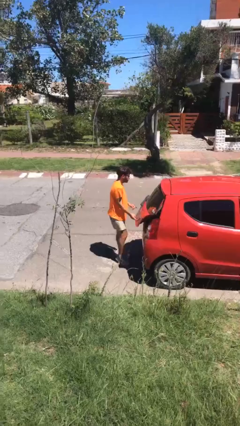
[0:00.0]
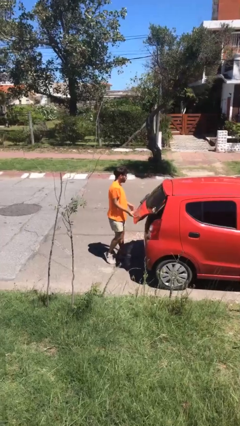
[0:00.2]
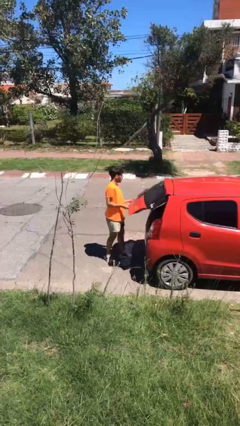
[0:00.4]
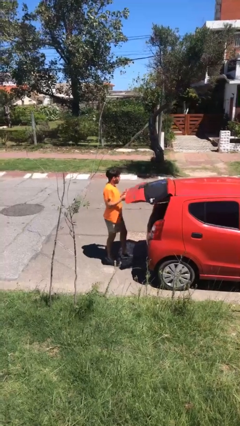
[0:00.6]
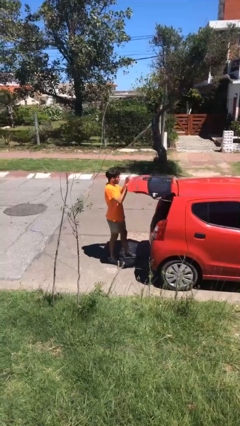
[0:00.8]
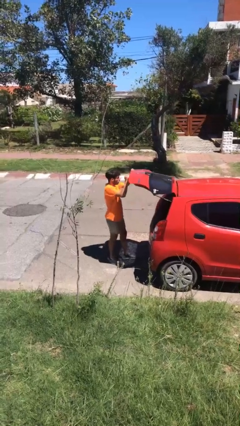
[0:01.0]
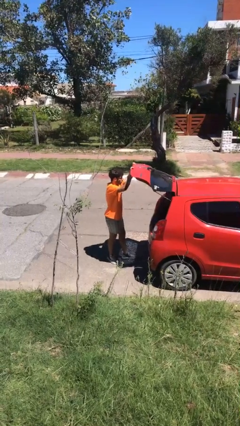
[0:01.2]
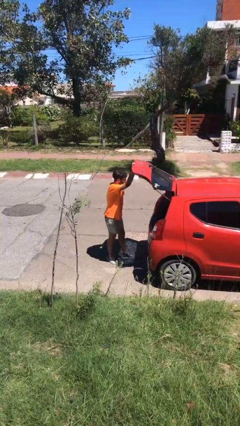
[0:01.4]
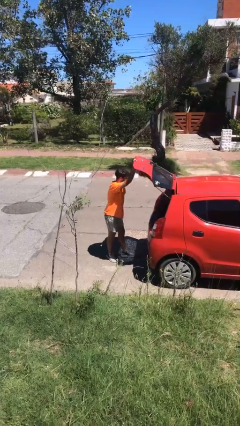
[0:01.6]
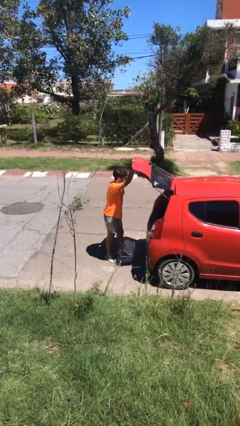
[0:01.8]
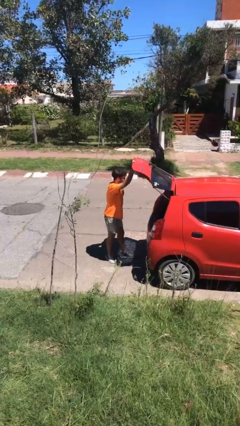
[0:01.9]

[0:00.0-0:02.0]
person opens car trunk

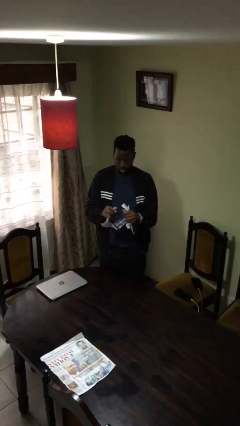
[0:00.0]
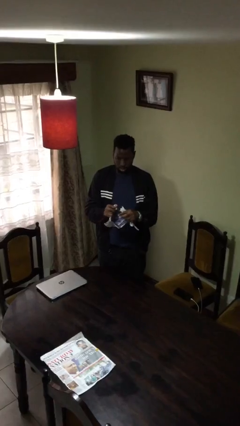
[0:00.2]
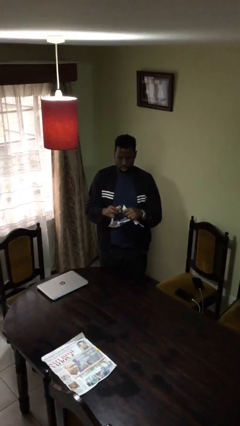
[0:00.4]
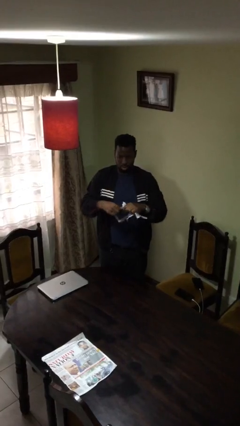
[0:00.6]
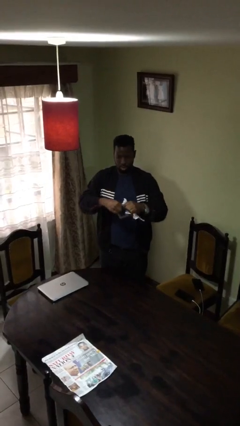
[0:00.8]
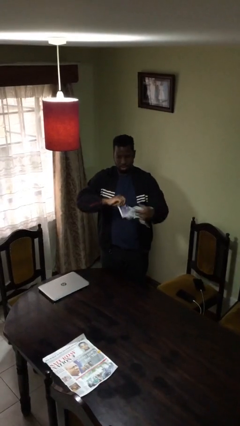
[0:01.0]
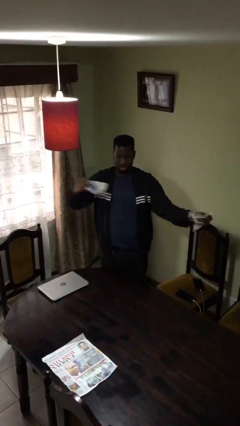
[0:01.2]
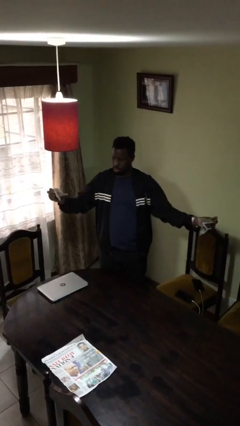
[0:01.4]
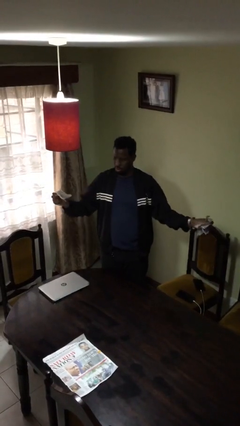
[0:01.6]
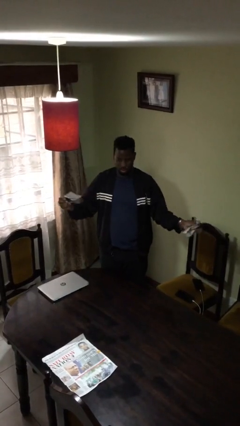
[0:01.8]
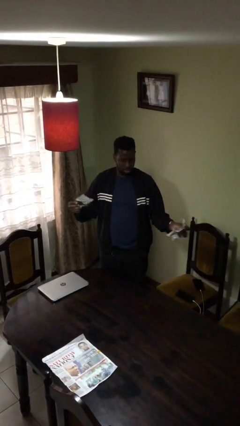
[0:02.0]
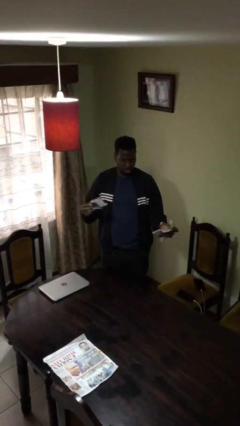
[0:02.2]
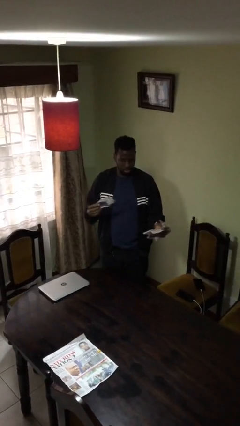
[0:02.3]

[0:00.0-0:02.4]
person tears paper

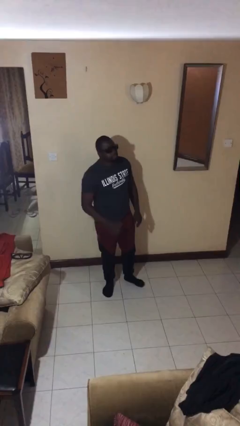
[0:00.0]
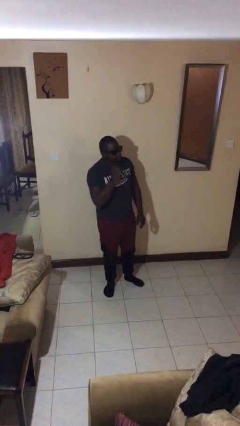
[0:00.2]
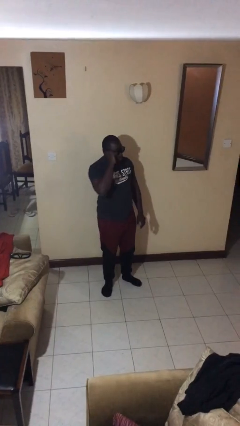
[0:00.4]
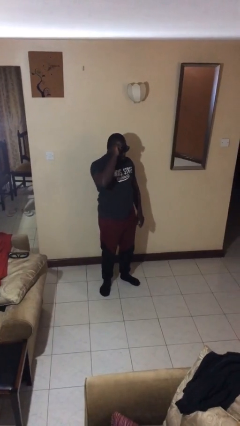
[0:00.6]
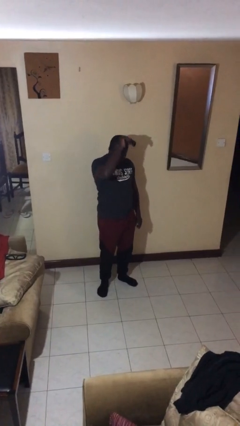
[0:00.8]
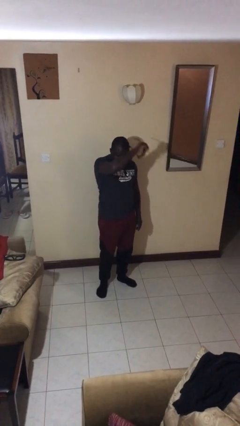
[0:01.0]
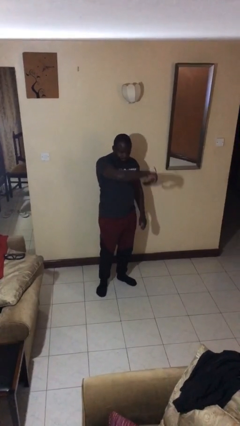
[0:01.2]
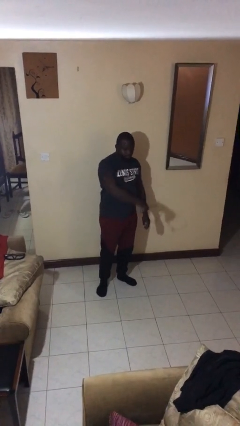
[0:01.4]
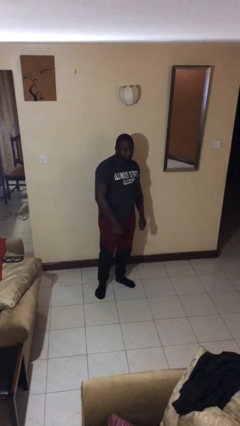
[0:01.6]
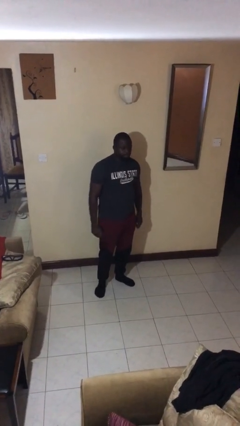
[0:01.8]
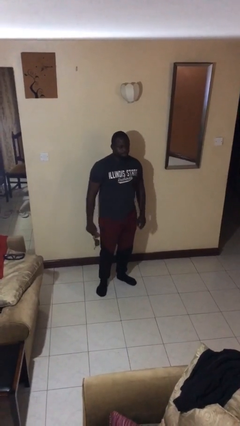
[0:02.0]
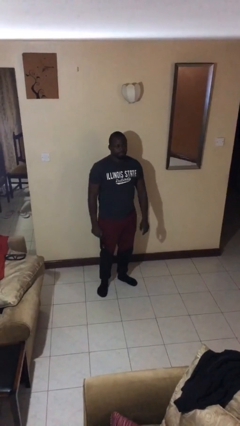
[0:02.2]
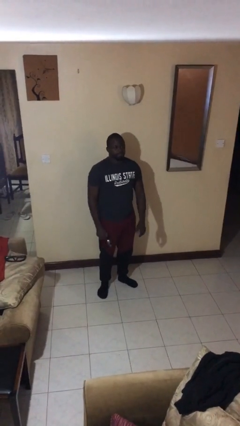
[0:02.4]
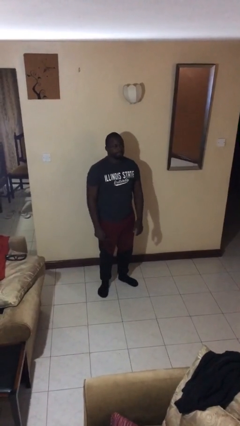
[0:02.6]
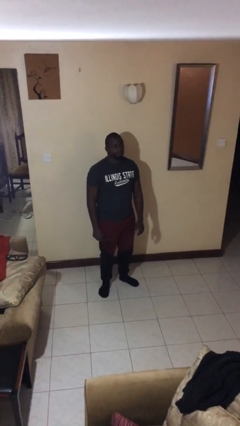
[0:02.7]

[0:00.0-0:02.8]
person takes off sunglasses

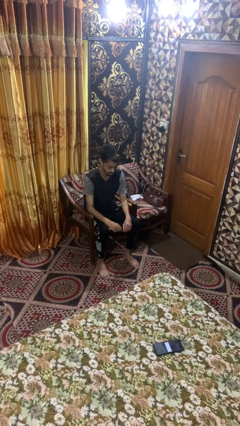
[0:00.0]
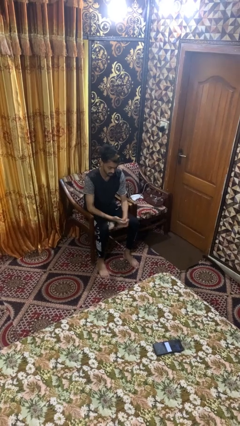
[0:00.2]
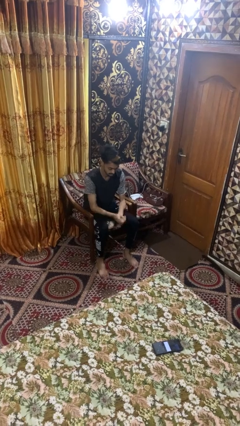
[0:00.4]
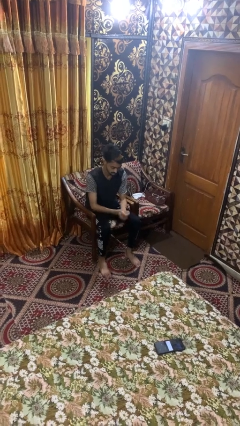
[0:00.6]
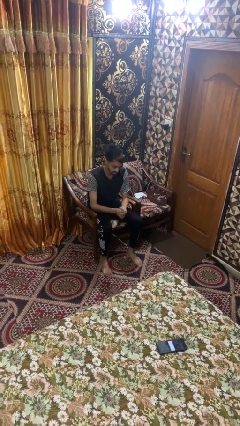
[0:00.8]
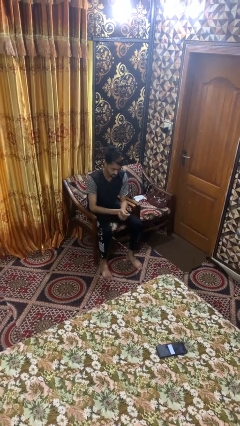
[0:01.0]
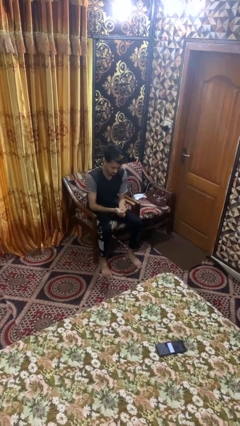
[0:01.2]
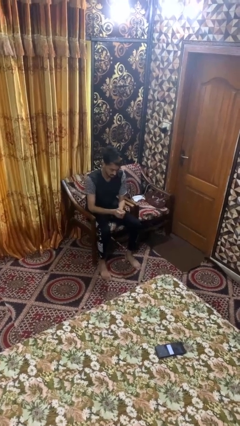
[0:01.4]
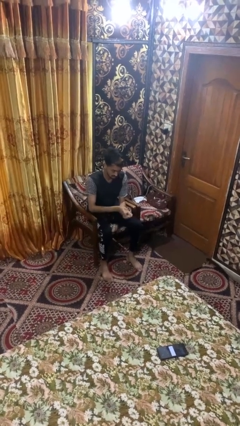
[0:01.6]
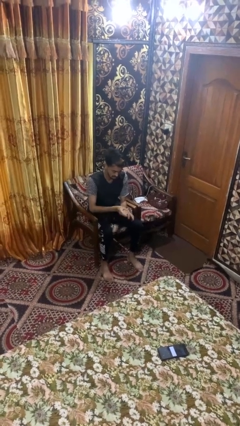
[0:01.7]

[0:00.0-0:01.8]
person looks at hands in lap

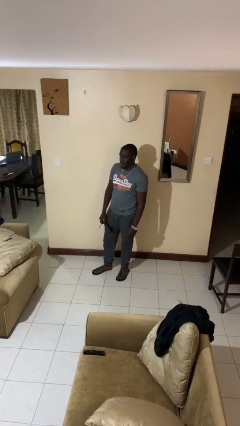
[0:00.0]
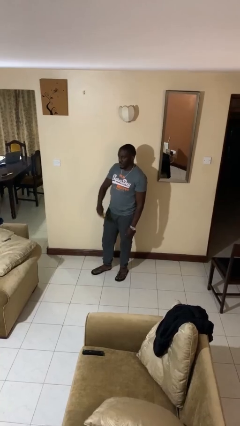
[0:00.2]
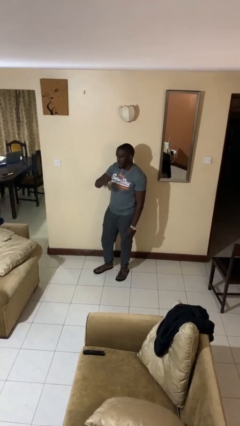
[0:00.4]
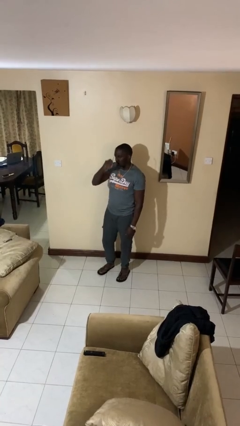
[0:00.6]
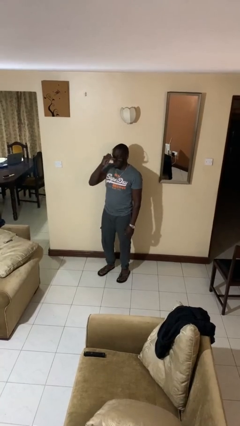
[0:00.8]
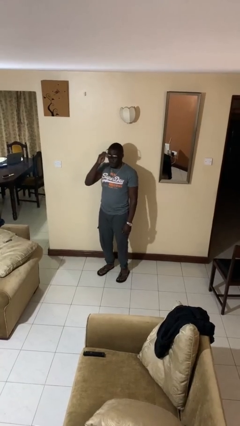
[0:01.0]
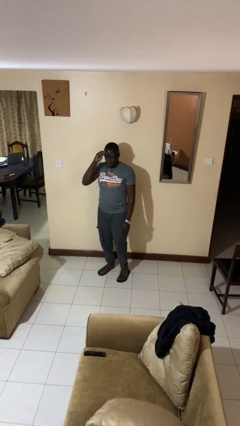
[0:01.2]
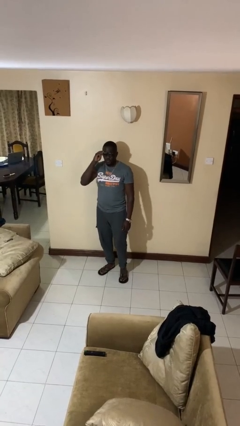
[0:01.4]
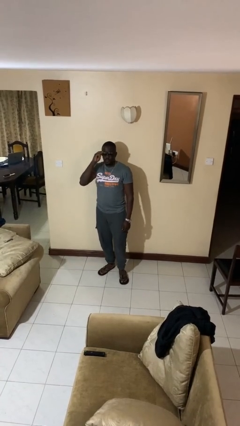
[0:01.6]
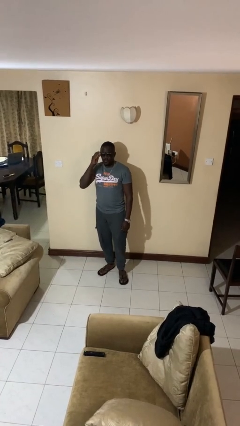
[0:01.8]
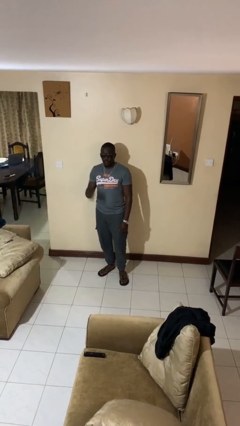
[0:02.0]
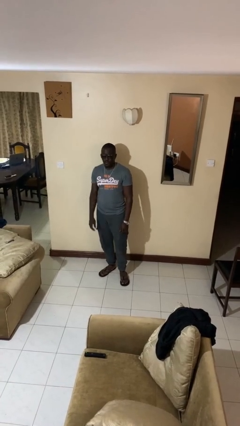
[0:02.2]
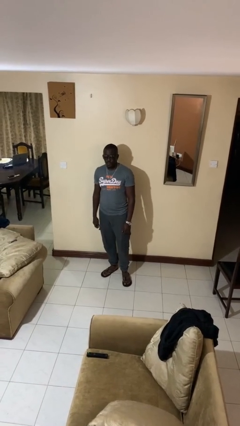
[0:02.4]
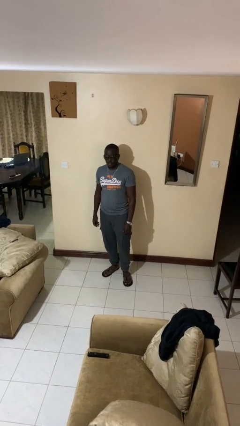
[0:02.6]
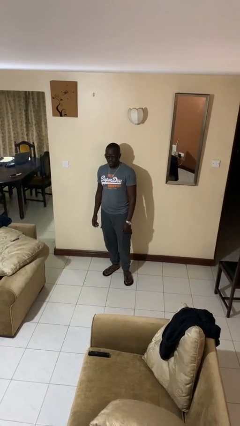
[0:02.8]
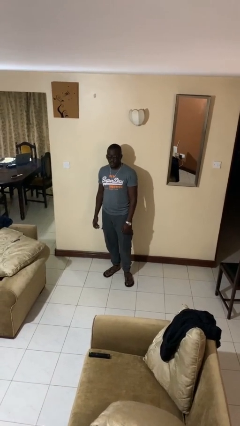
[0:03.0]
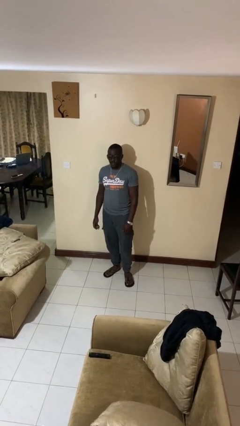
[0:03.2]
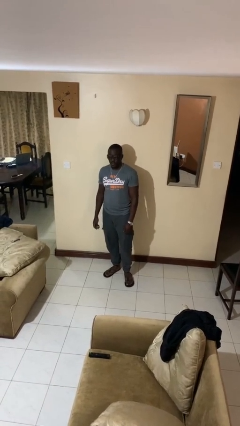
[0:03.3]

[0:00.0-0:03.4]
person puts on sunglasses

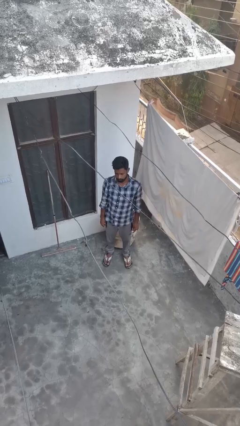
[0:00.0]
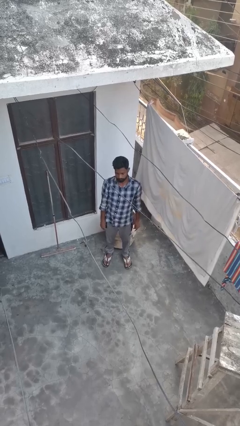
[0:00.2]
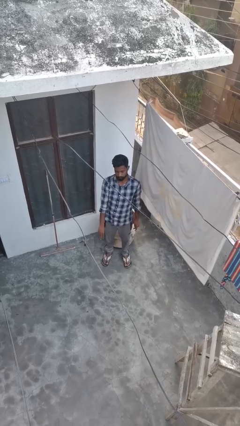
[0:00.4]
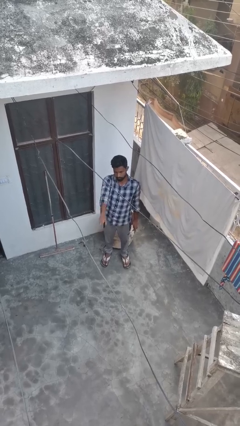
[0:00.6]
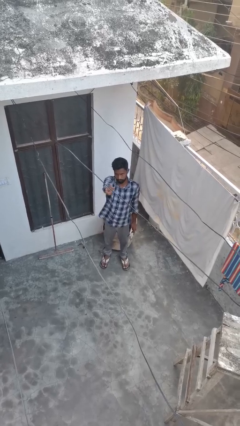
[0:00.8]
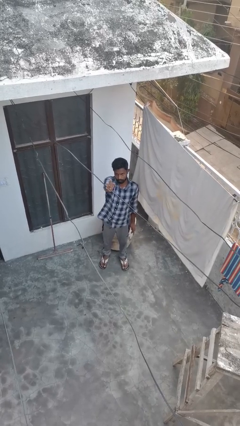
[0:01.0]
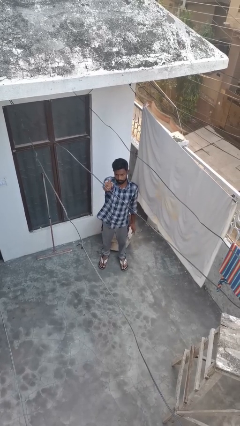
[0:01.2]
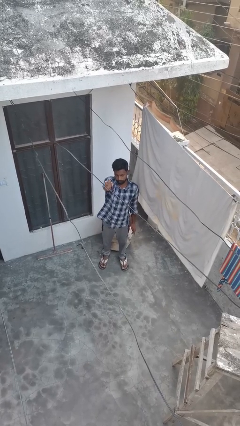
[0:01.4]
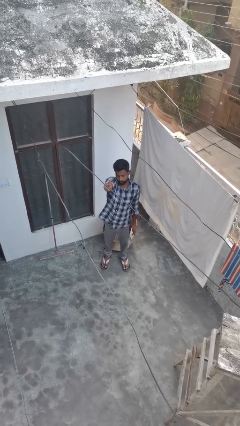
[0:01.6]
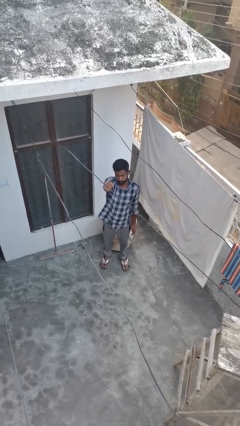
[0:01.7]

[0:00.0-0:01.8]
person gestures number three

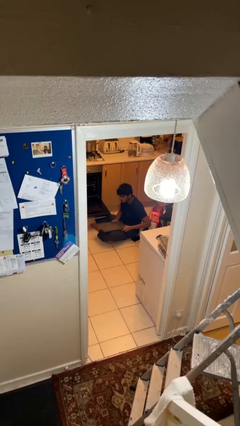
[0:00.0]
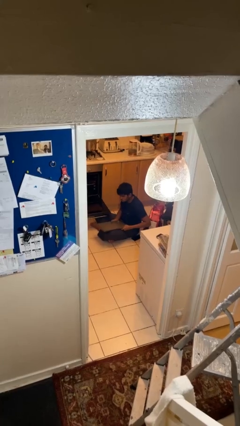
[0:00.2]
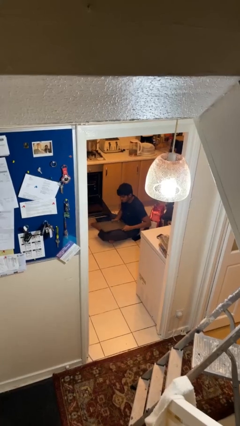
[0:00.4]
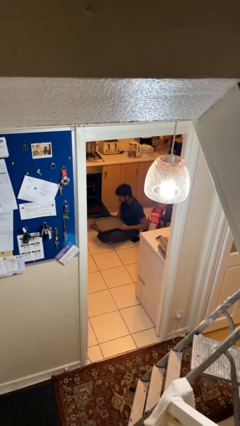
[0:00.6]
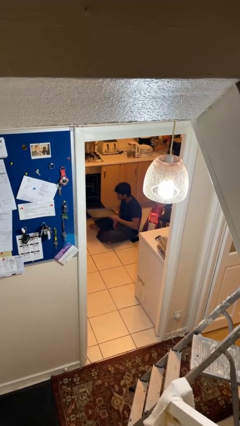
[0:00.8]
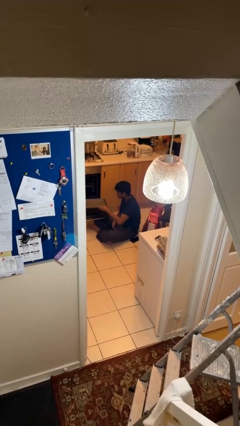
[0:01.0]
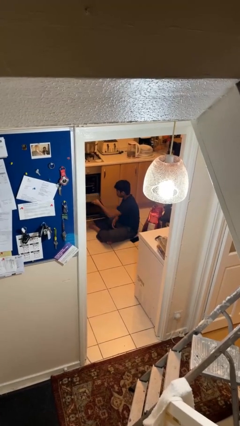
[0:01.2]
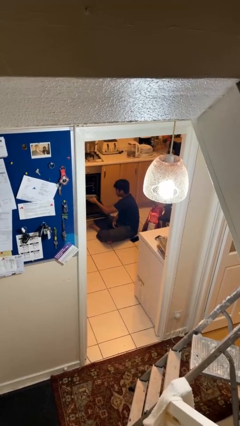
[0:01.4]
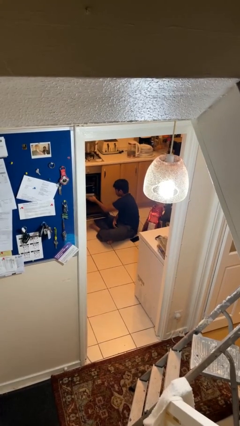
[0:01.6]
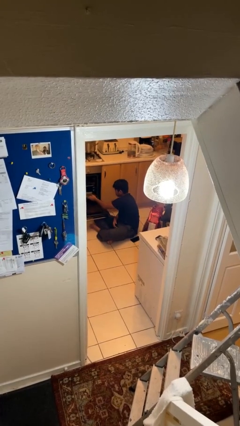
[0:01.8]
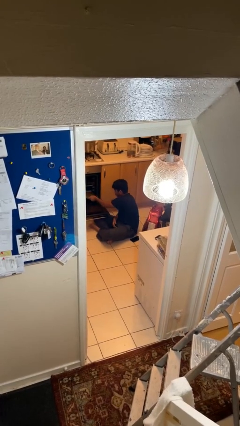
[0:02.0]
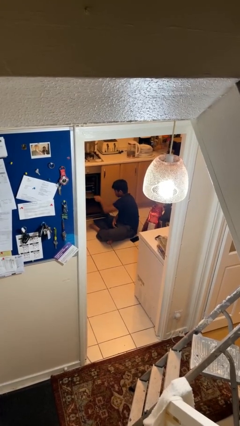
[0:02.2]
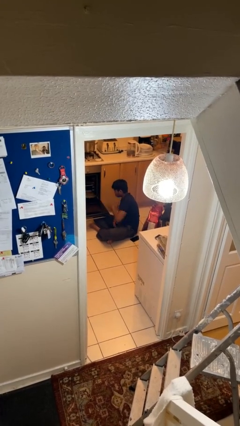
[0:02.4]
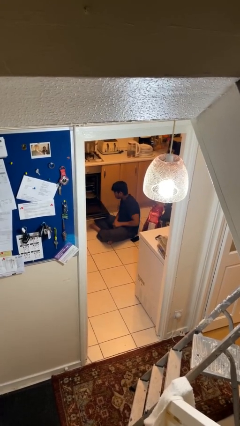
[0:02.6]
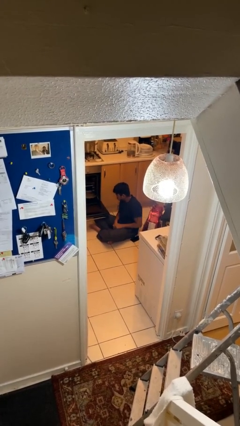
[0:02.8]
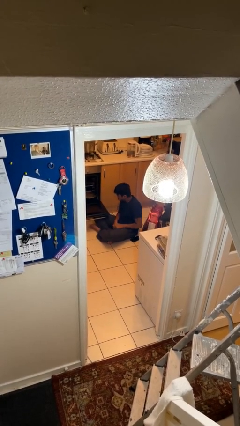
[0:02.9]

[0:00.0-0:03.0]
person puts object into oven
